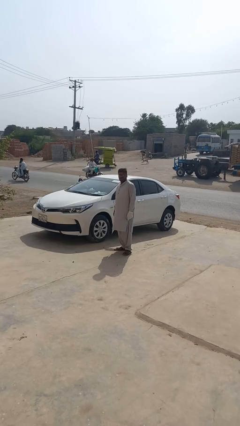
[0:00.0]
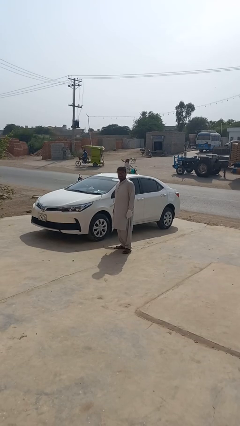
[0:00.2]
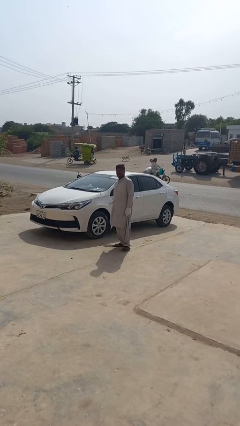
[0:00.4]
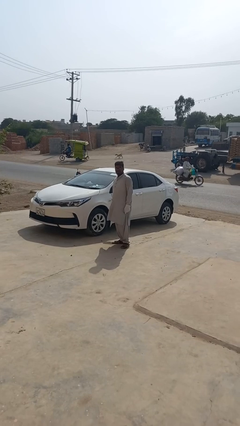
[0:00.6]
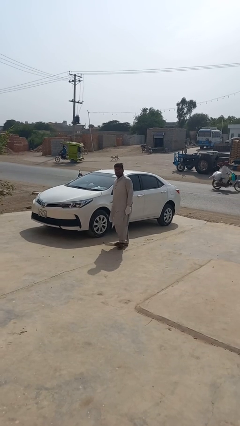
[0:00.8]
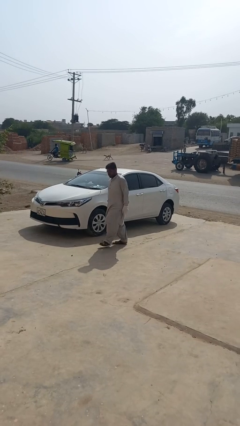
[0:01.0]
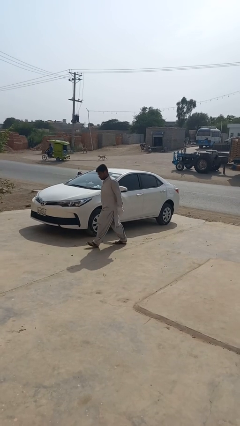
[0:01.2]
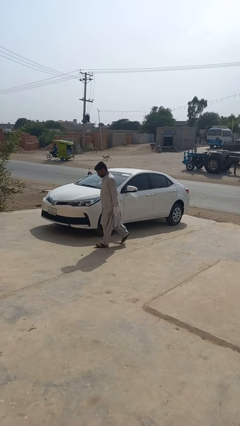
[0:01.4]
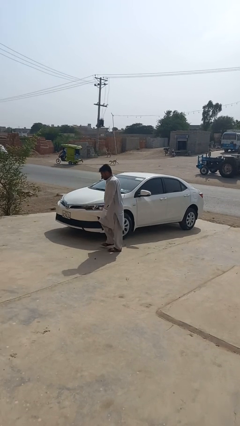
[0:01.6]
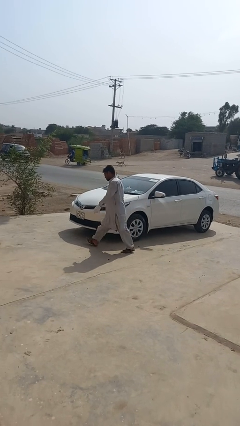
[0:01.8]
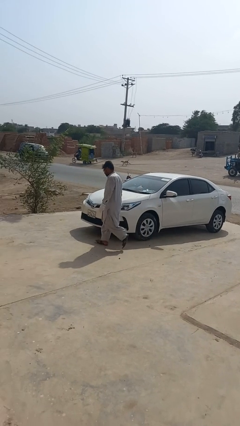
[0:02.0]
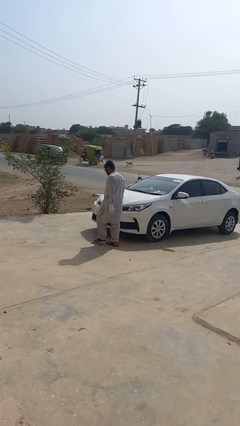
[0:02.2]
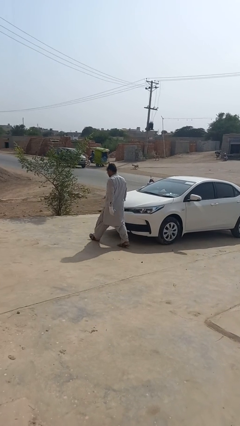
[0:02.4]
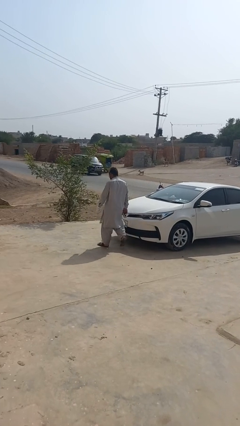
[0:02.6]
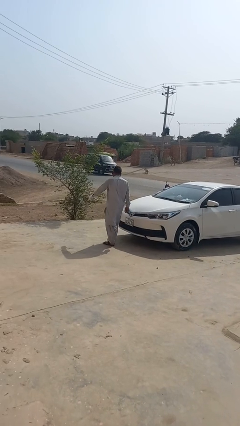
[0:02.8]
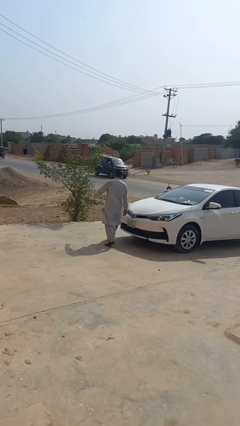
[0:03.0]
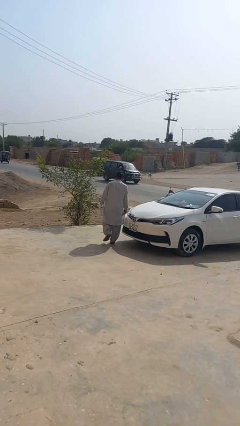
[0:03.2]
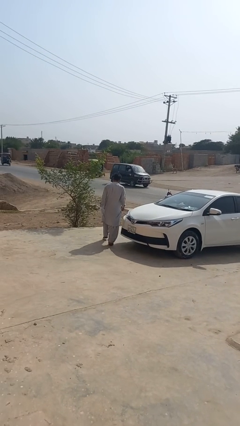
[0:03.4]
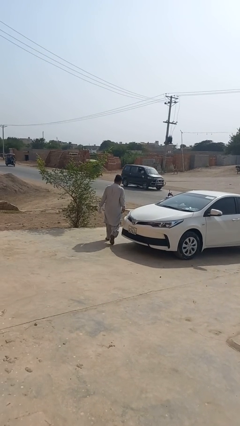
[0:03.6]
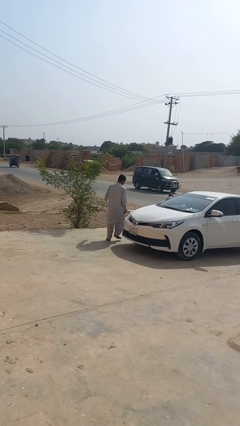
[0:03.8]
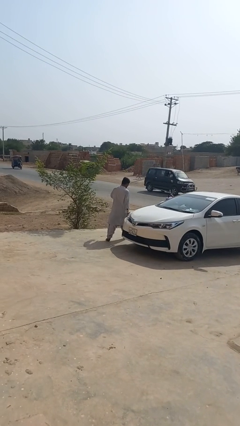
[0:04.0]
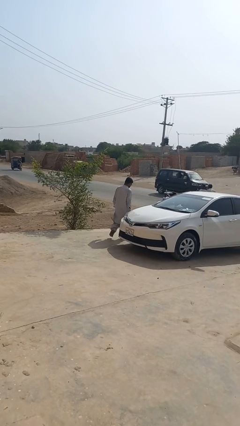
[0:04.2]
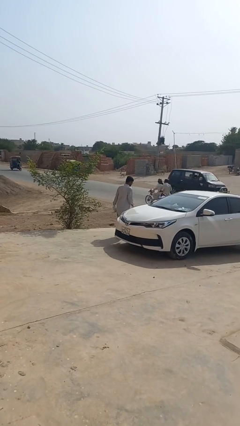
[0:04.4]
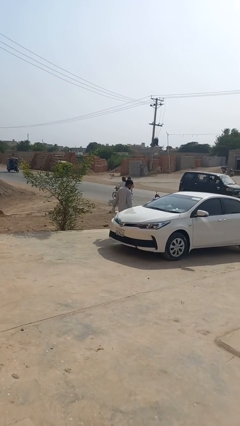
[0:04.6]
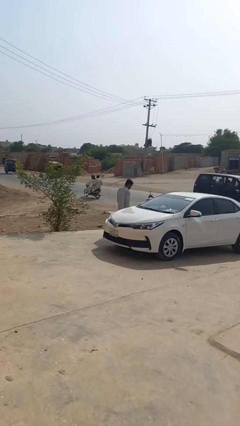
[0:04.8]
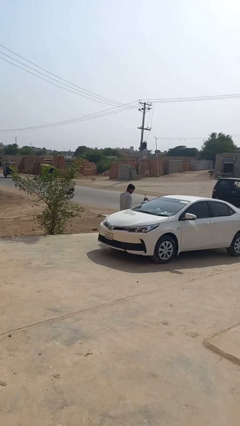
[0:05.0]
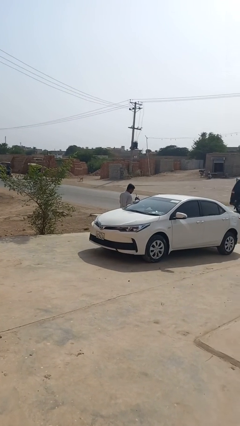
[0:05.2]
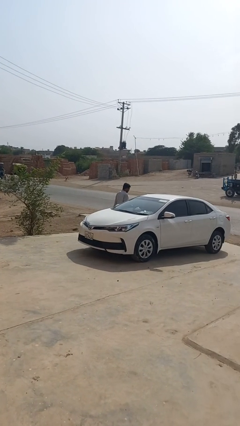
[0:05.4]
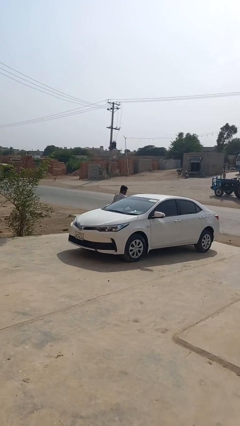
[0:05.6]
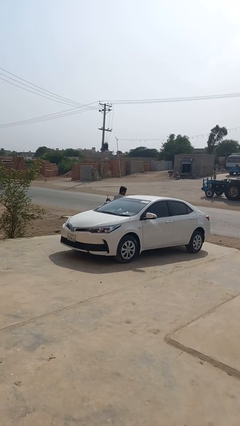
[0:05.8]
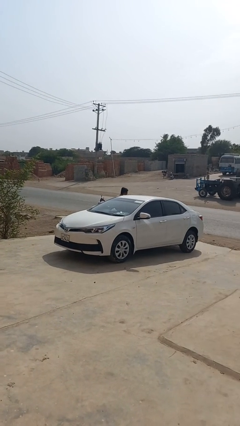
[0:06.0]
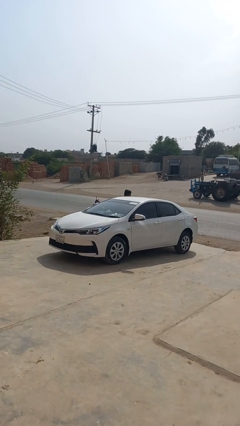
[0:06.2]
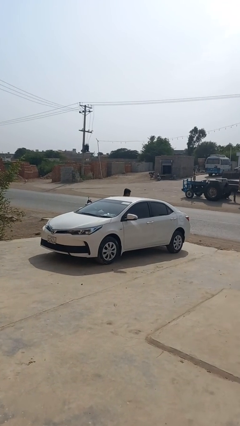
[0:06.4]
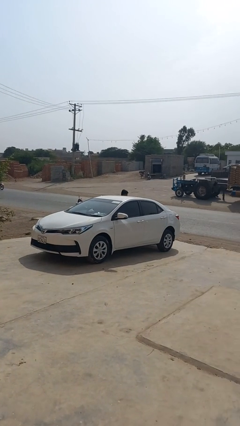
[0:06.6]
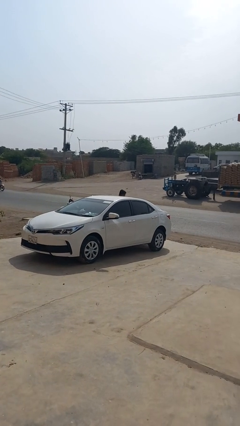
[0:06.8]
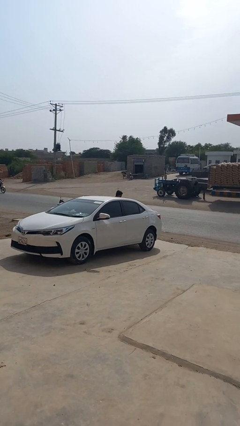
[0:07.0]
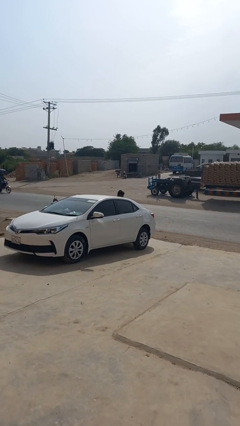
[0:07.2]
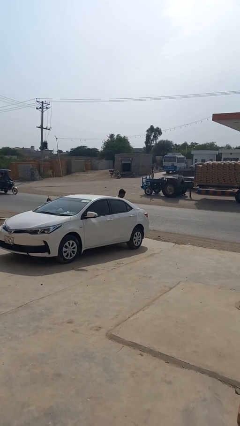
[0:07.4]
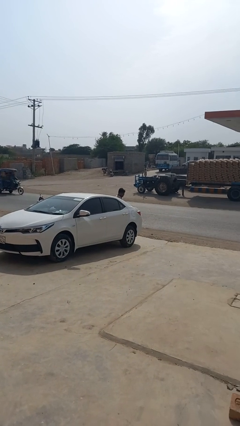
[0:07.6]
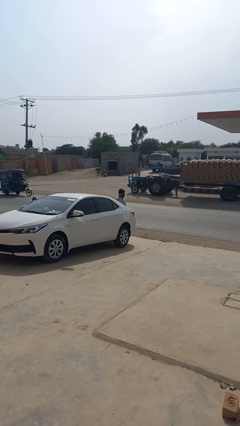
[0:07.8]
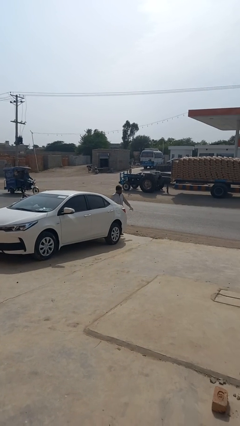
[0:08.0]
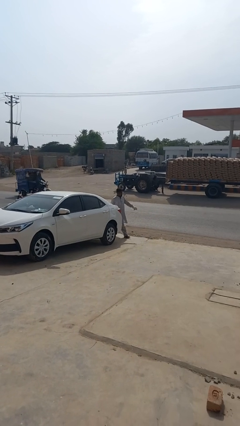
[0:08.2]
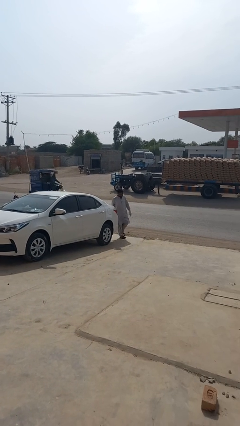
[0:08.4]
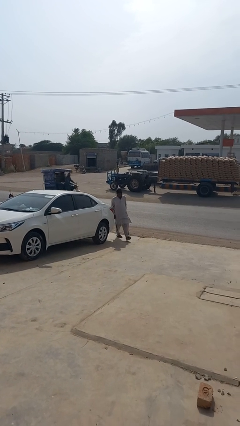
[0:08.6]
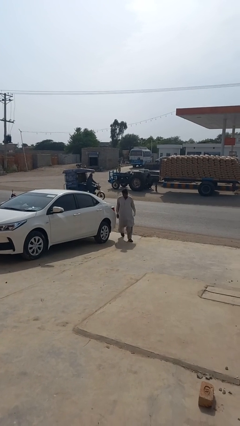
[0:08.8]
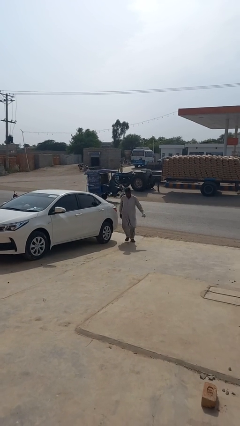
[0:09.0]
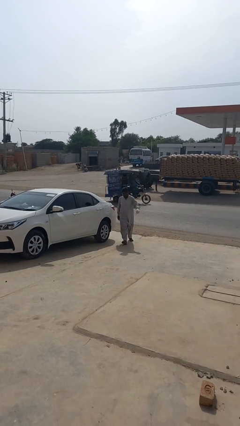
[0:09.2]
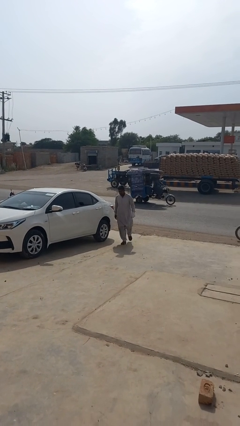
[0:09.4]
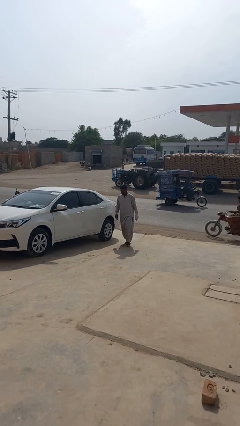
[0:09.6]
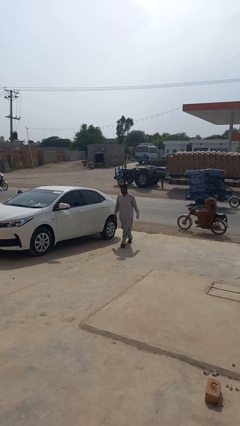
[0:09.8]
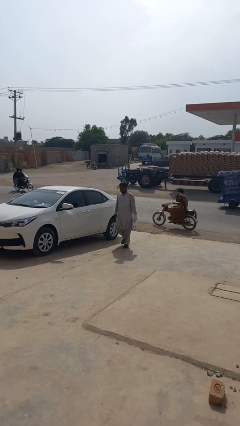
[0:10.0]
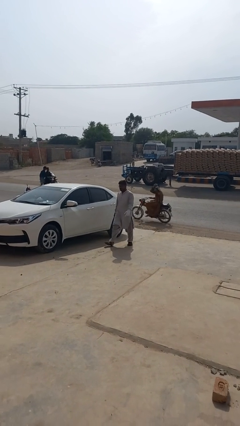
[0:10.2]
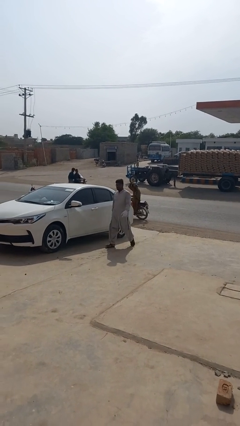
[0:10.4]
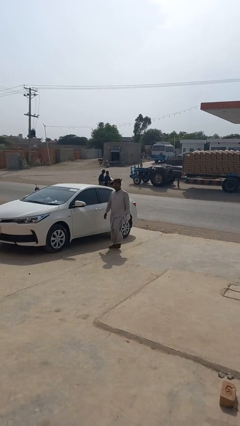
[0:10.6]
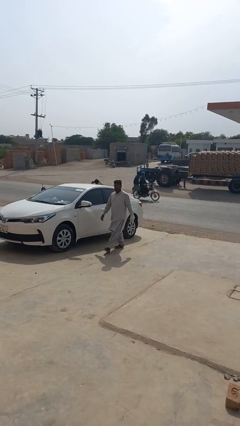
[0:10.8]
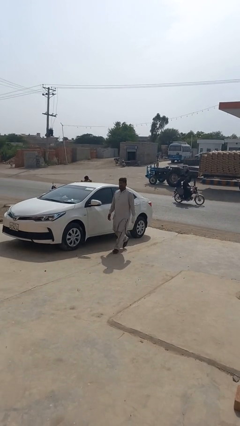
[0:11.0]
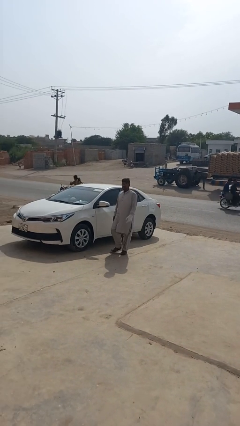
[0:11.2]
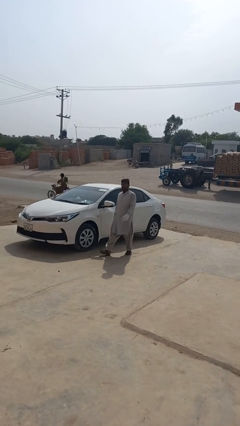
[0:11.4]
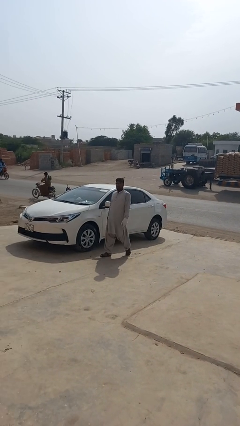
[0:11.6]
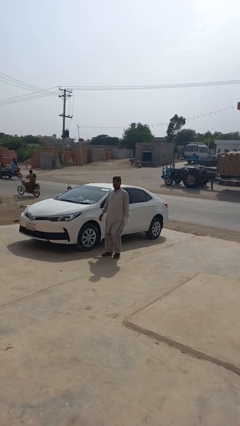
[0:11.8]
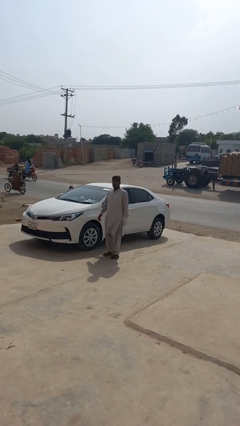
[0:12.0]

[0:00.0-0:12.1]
person walks around car

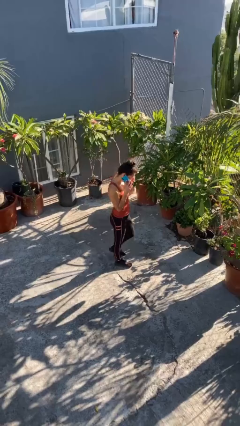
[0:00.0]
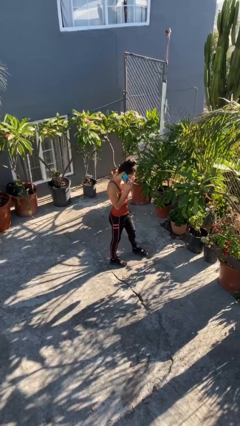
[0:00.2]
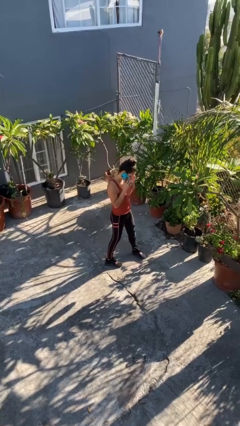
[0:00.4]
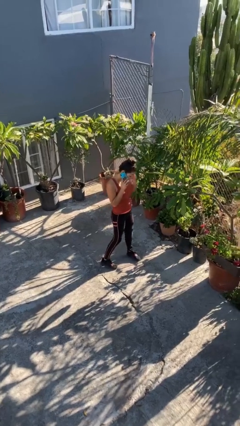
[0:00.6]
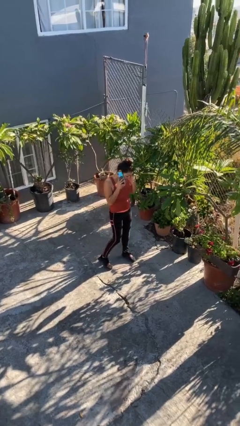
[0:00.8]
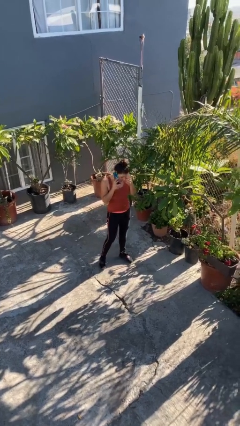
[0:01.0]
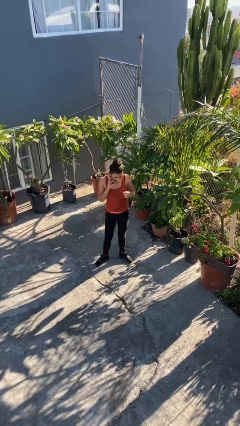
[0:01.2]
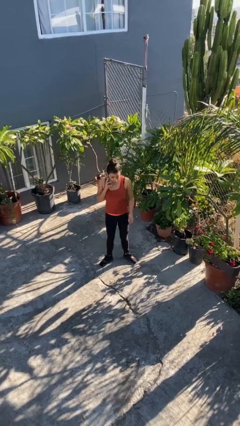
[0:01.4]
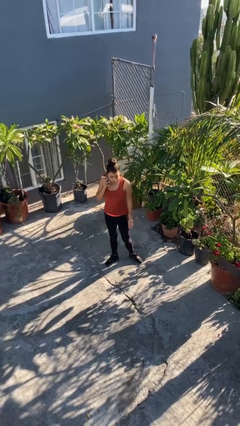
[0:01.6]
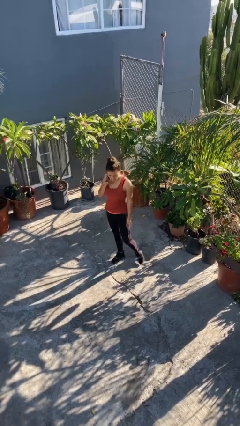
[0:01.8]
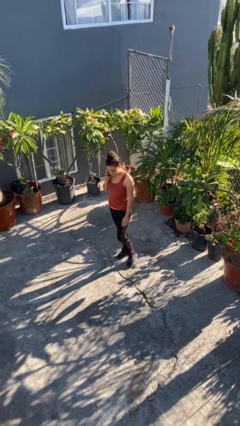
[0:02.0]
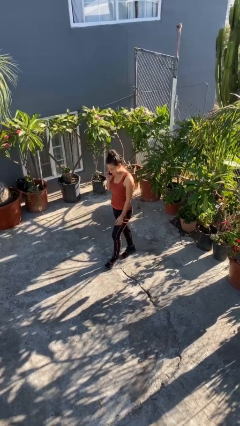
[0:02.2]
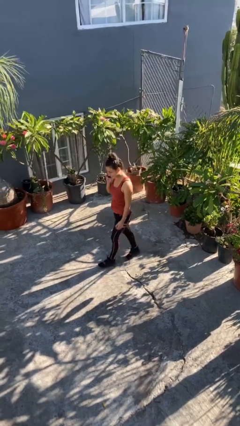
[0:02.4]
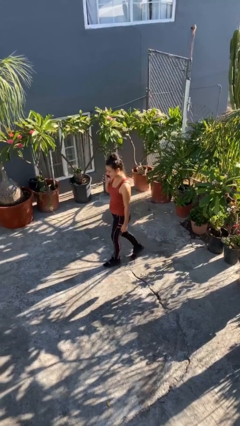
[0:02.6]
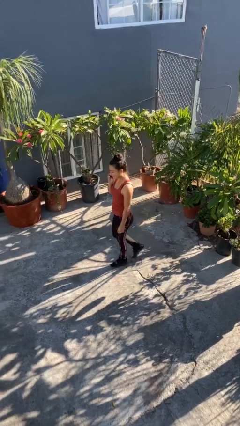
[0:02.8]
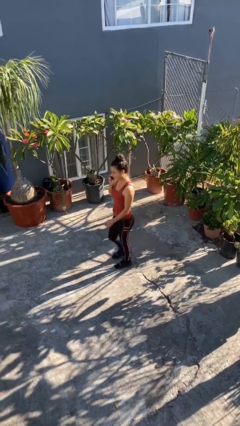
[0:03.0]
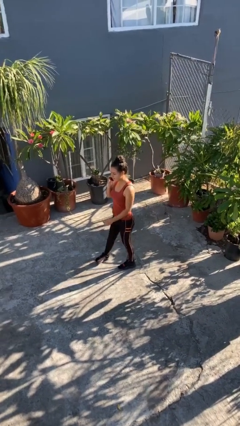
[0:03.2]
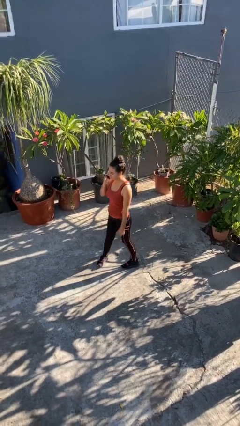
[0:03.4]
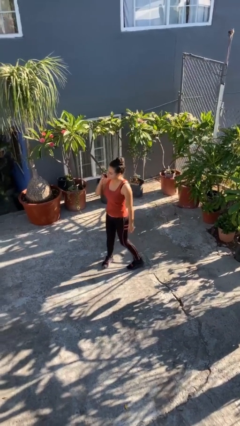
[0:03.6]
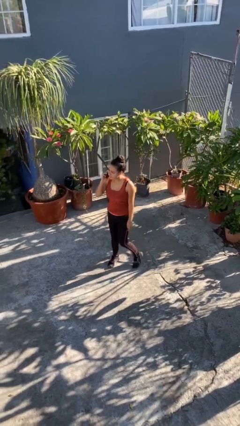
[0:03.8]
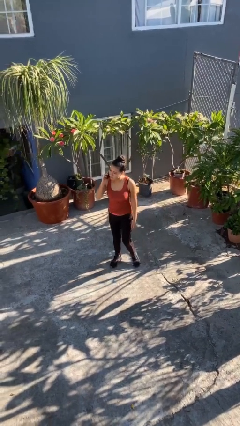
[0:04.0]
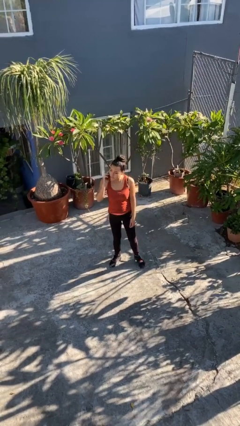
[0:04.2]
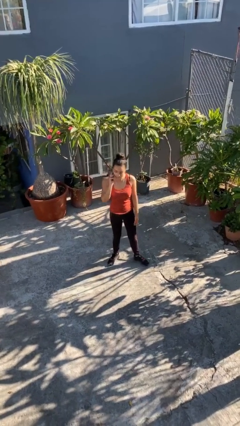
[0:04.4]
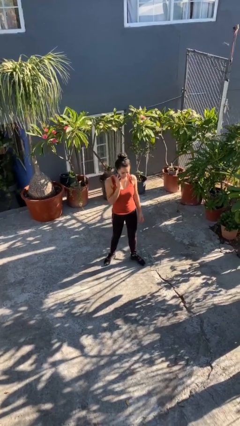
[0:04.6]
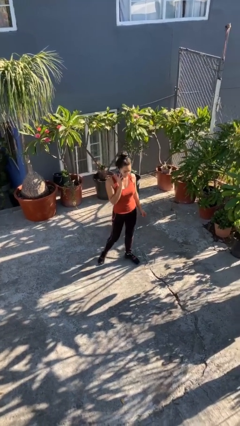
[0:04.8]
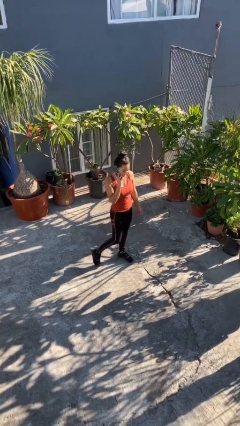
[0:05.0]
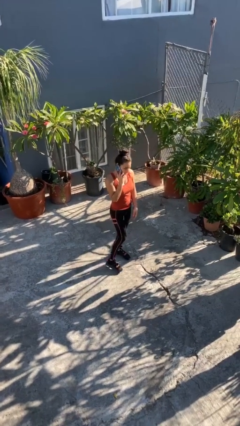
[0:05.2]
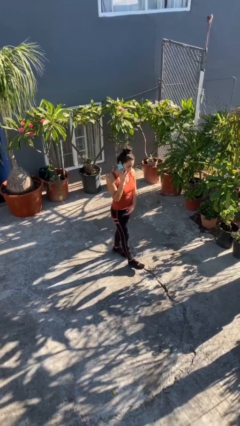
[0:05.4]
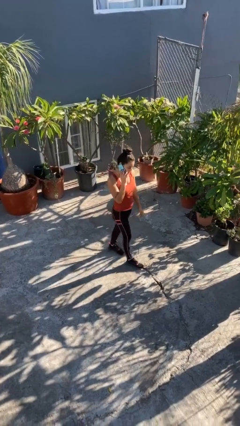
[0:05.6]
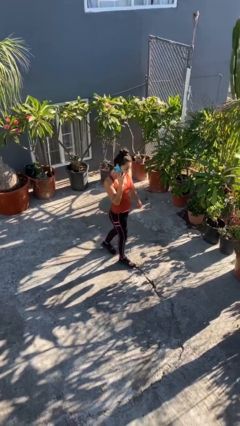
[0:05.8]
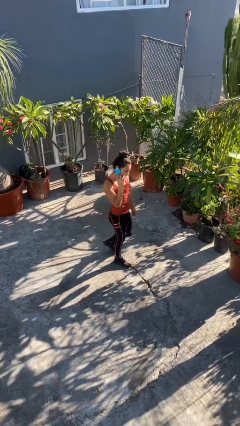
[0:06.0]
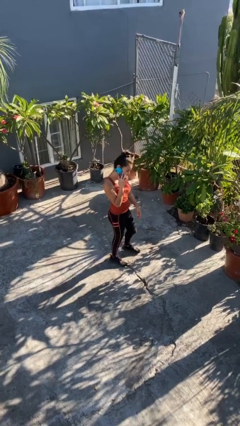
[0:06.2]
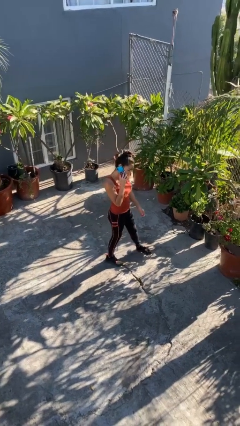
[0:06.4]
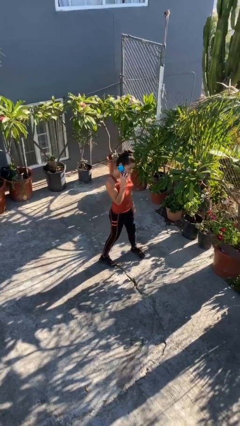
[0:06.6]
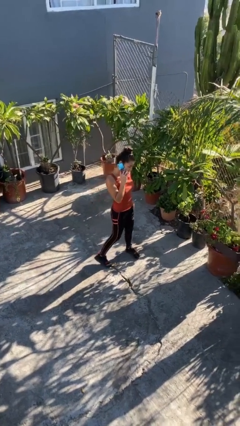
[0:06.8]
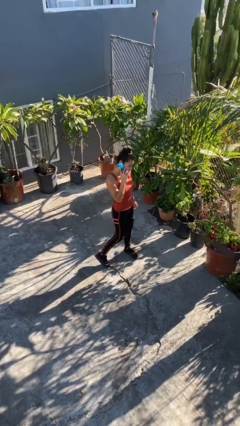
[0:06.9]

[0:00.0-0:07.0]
person talks on phone
